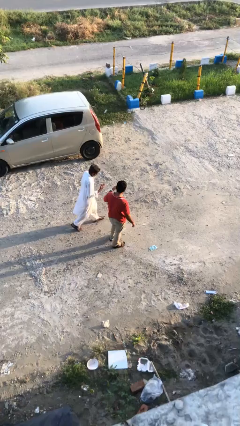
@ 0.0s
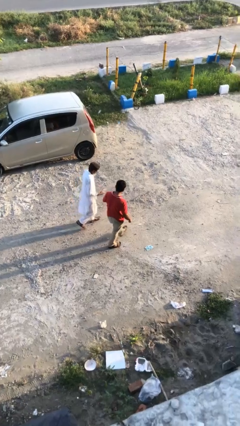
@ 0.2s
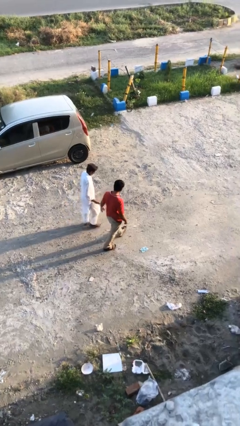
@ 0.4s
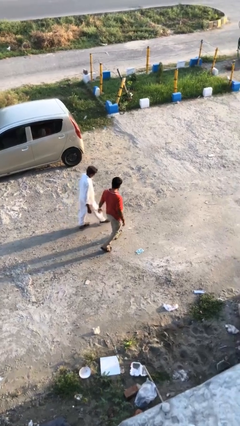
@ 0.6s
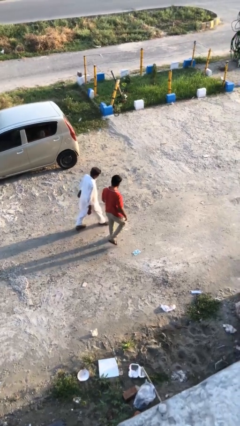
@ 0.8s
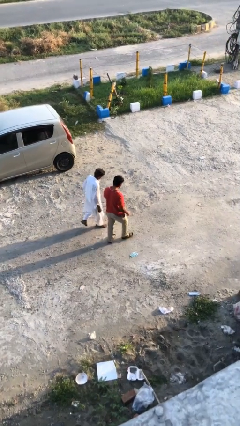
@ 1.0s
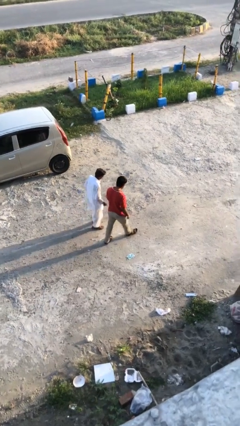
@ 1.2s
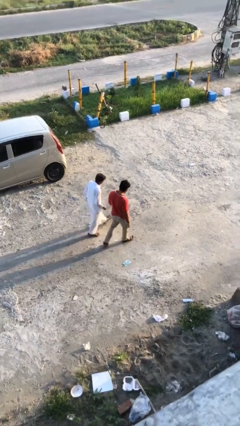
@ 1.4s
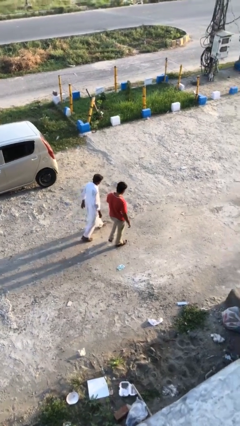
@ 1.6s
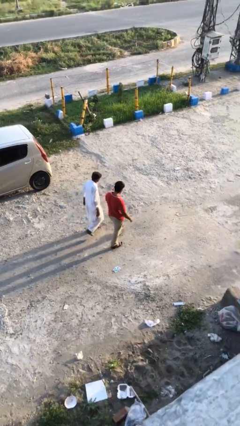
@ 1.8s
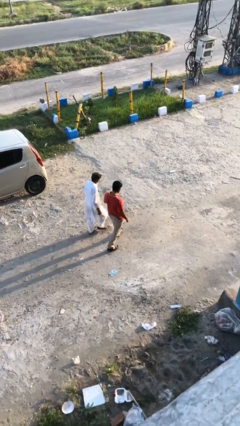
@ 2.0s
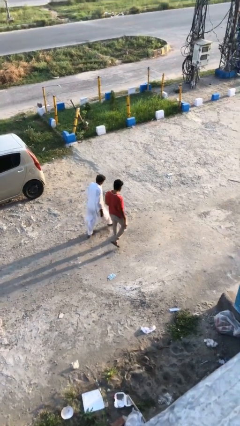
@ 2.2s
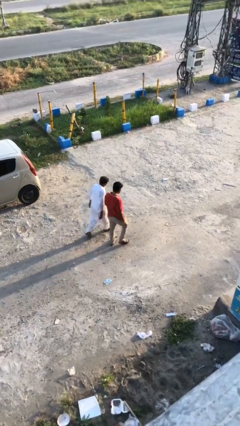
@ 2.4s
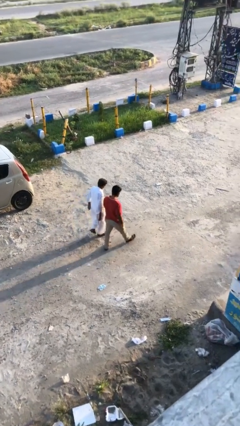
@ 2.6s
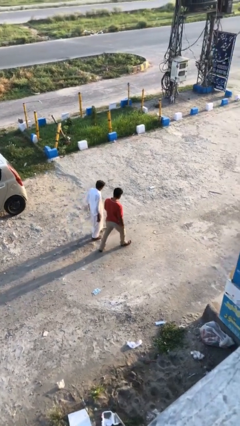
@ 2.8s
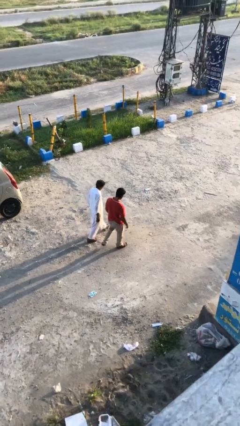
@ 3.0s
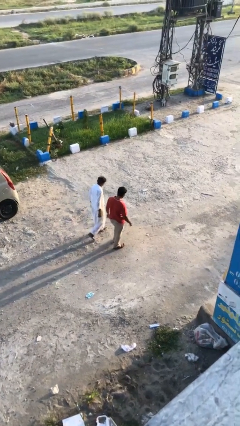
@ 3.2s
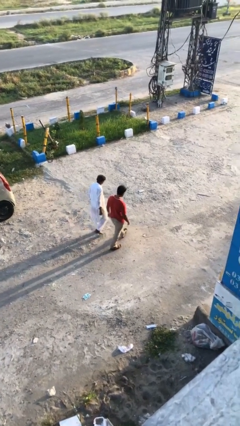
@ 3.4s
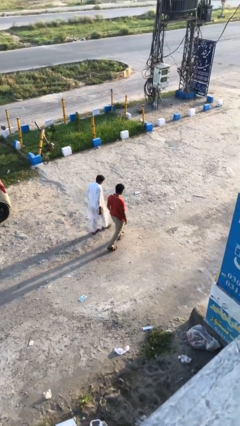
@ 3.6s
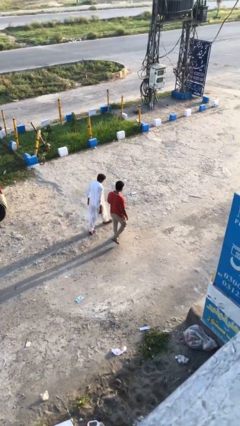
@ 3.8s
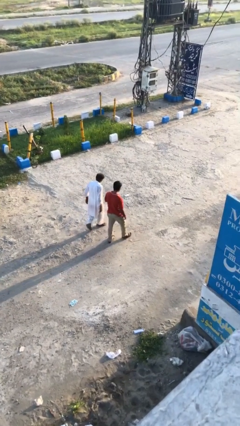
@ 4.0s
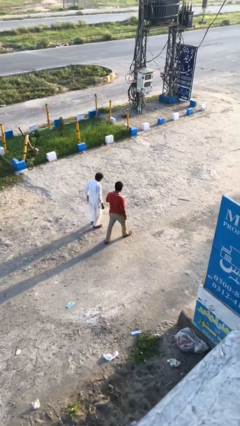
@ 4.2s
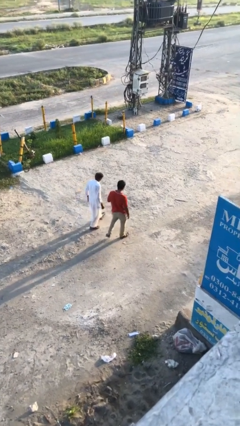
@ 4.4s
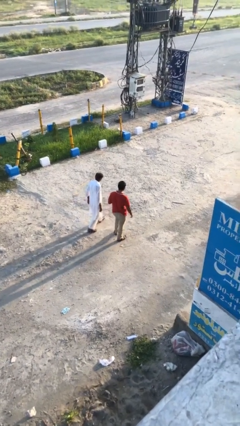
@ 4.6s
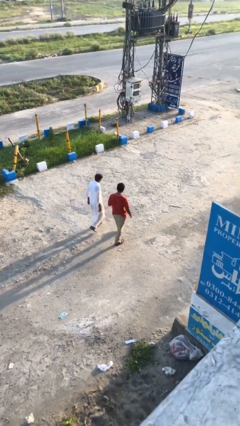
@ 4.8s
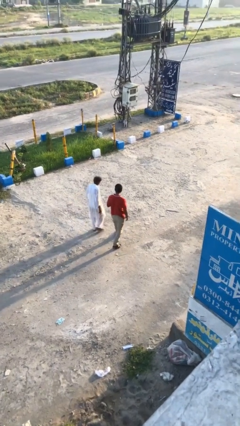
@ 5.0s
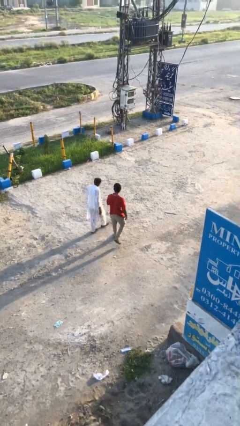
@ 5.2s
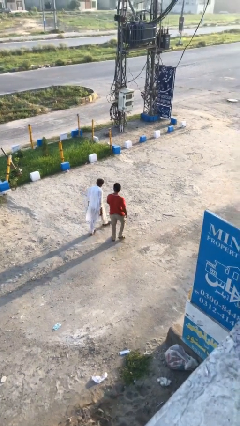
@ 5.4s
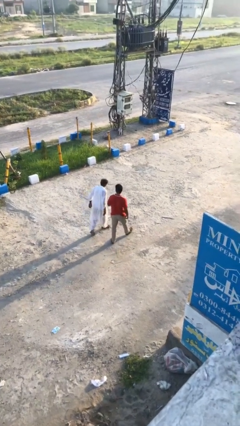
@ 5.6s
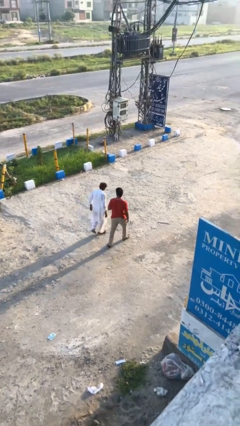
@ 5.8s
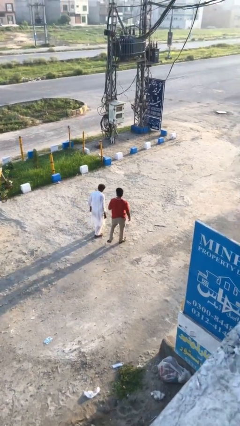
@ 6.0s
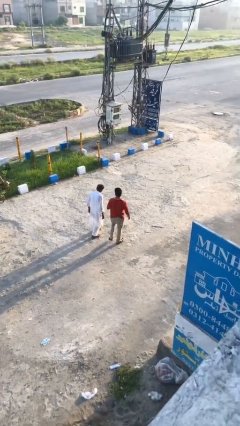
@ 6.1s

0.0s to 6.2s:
person talks to person

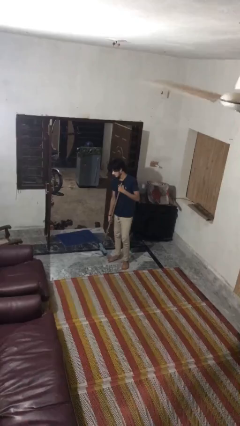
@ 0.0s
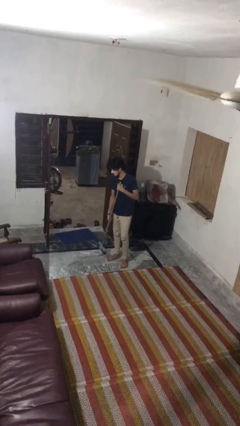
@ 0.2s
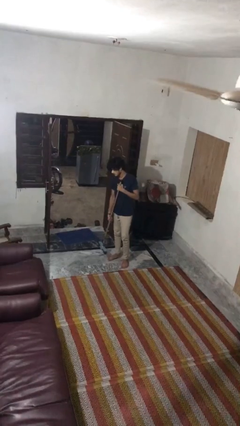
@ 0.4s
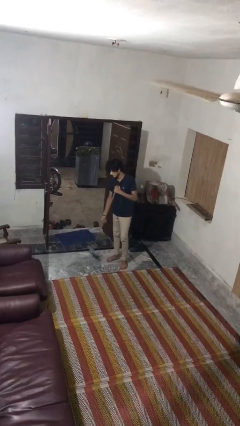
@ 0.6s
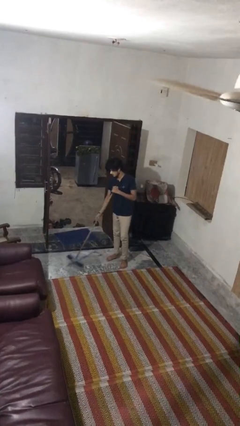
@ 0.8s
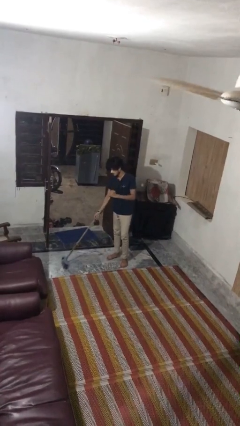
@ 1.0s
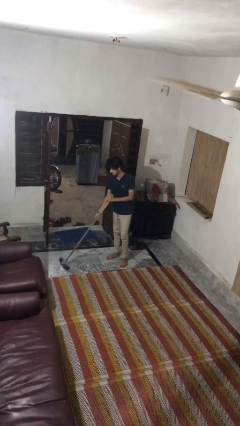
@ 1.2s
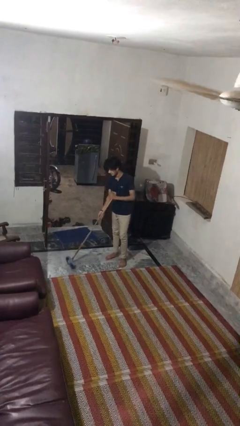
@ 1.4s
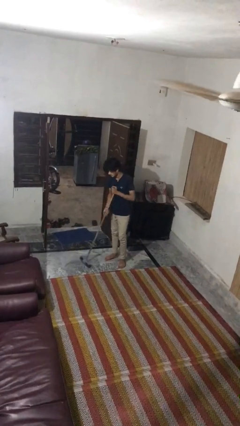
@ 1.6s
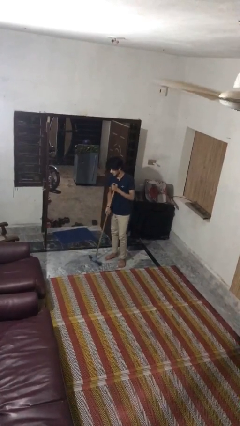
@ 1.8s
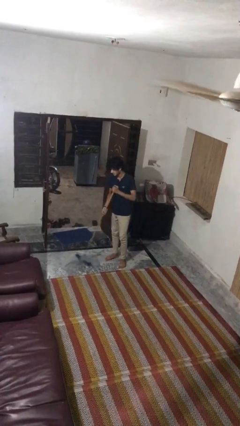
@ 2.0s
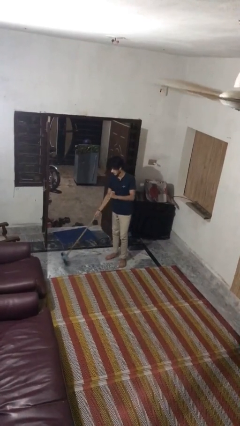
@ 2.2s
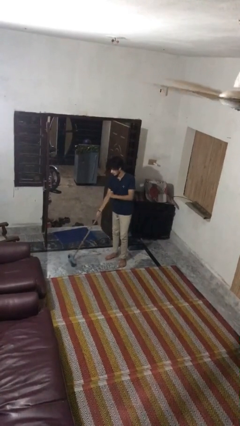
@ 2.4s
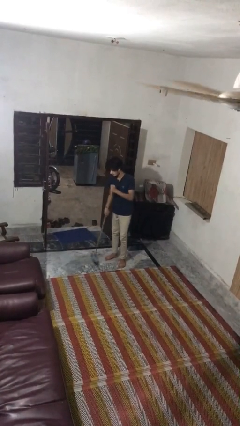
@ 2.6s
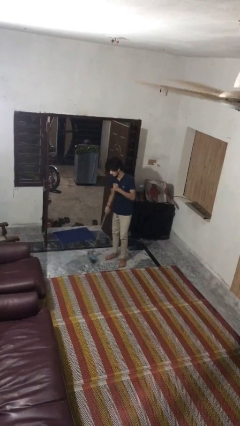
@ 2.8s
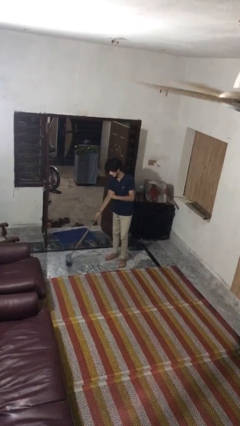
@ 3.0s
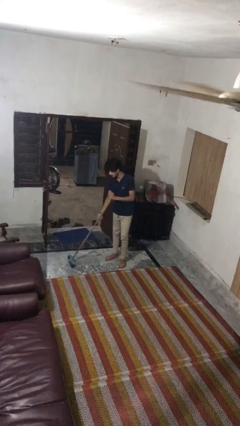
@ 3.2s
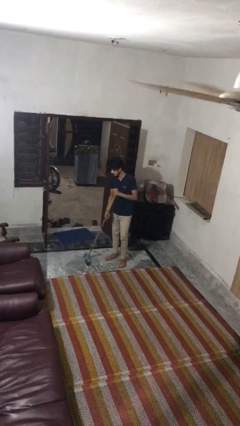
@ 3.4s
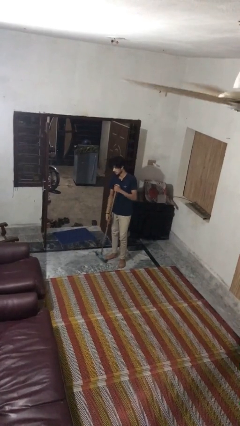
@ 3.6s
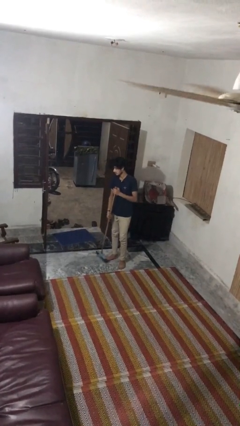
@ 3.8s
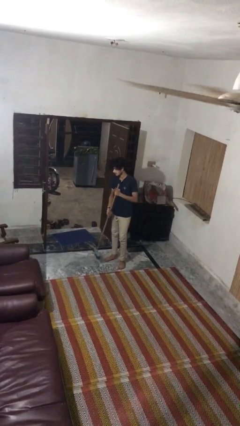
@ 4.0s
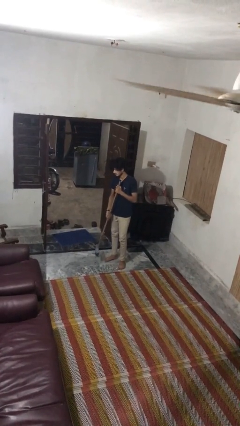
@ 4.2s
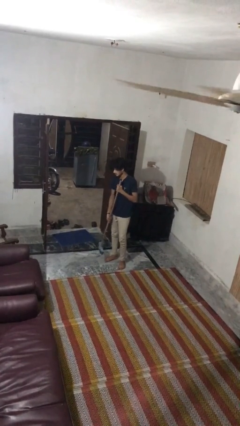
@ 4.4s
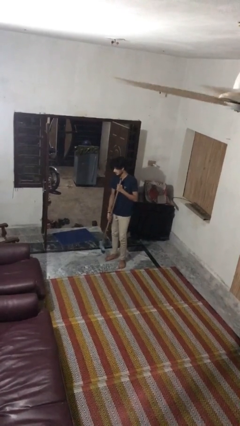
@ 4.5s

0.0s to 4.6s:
person sweeps floor

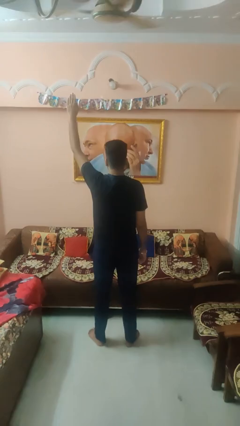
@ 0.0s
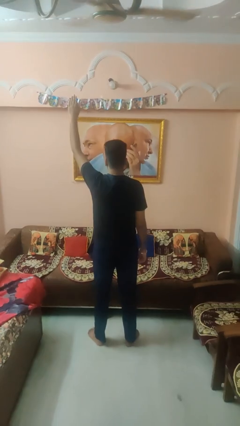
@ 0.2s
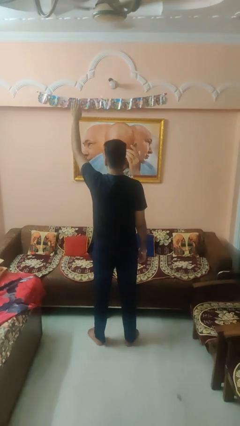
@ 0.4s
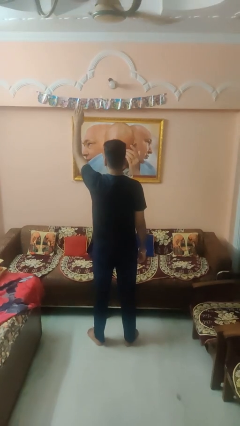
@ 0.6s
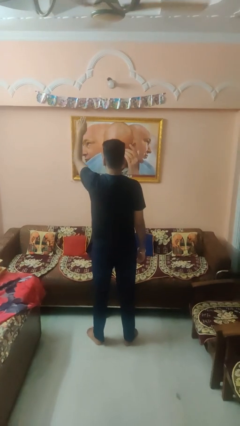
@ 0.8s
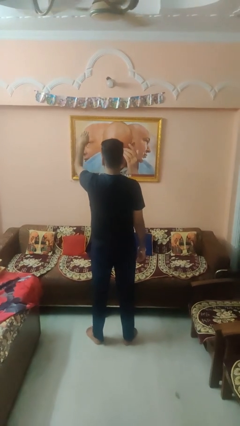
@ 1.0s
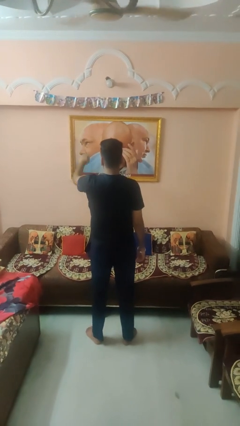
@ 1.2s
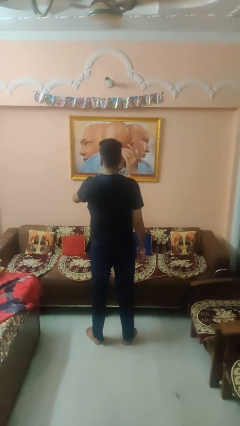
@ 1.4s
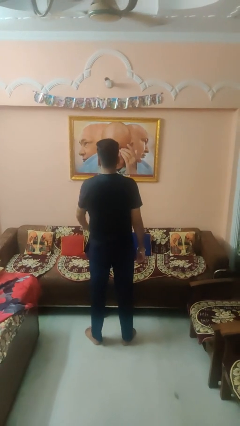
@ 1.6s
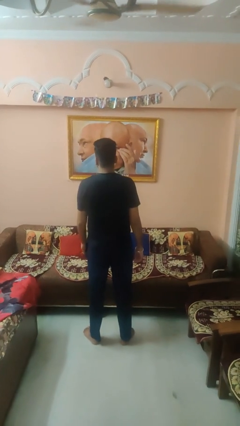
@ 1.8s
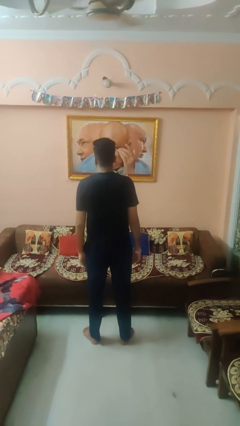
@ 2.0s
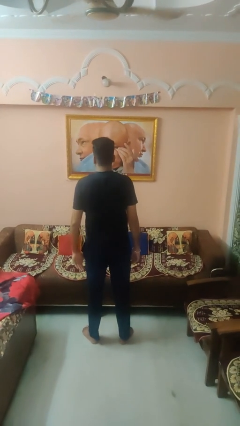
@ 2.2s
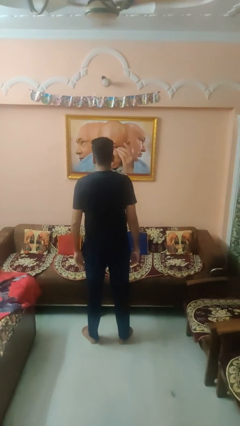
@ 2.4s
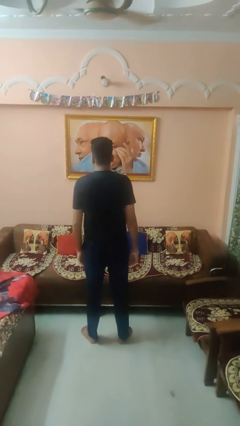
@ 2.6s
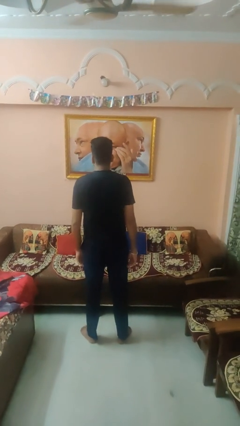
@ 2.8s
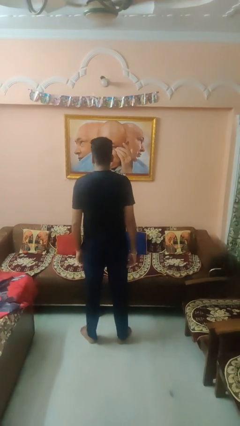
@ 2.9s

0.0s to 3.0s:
person gestures lower hand

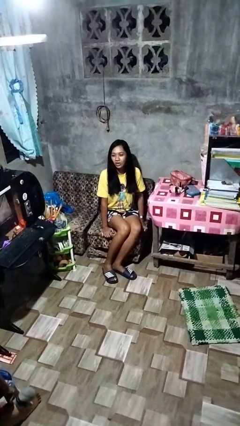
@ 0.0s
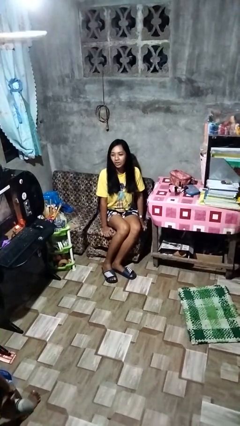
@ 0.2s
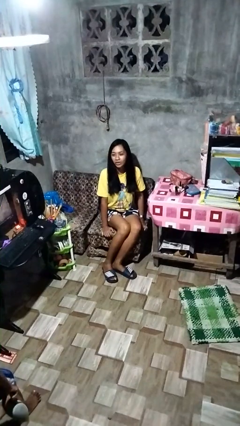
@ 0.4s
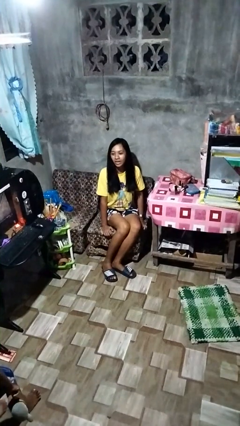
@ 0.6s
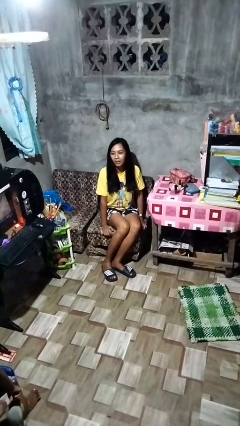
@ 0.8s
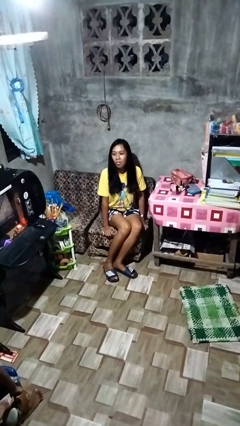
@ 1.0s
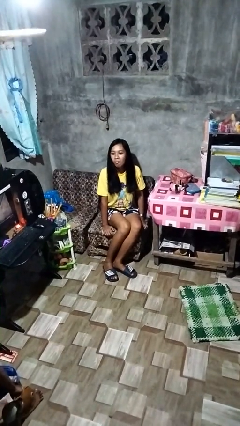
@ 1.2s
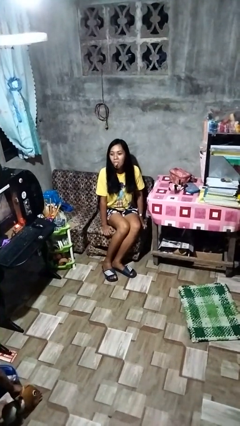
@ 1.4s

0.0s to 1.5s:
person sticks out tongue

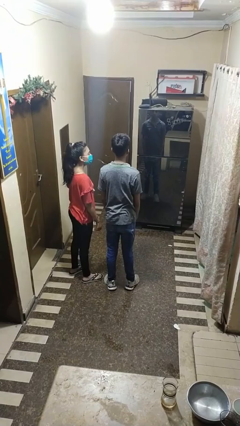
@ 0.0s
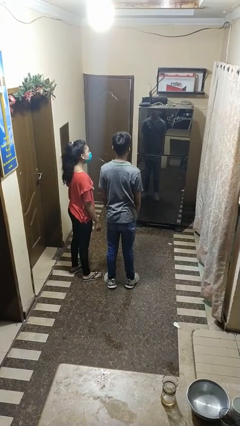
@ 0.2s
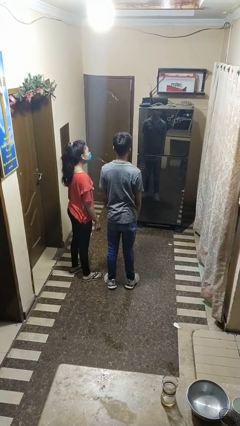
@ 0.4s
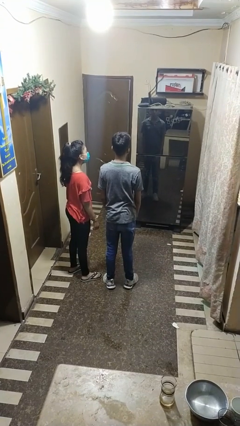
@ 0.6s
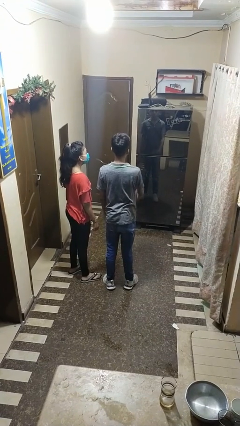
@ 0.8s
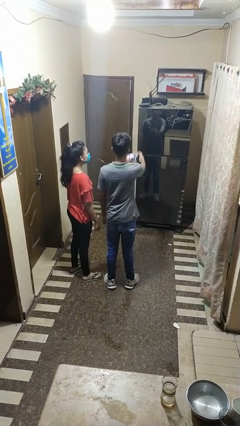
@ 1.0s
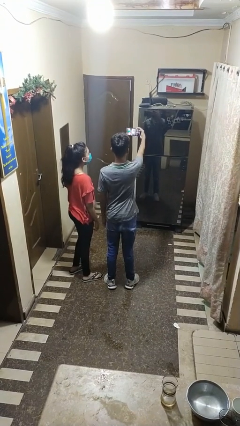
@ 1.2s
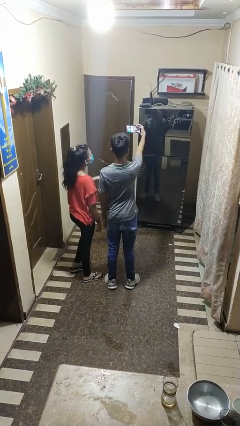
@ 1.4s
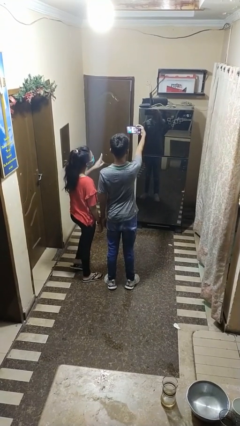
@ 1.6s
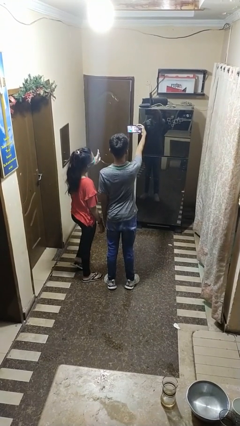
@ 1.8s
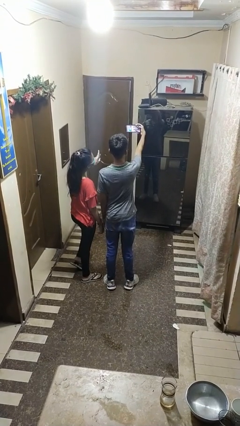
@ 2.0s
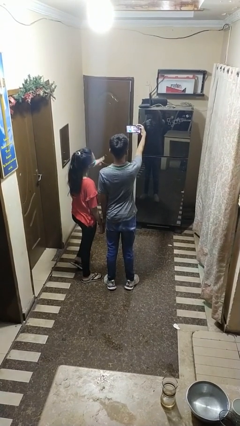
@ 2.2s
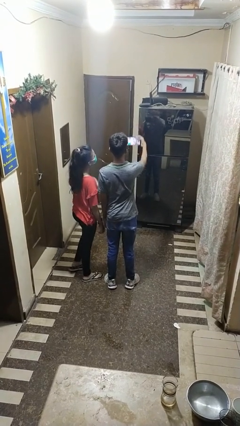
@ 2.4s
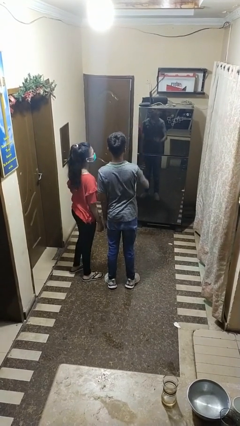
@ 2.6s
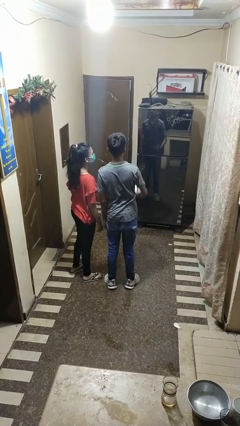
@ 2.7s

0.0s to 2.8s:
person takes selfie with person
